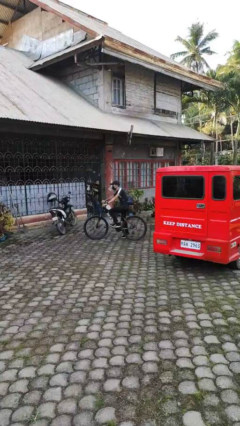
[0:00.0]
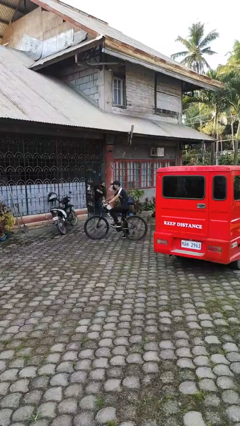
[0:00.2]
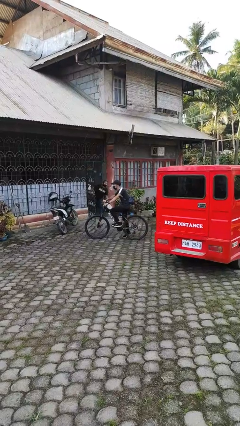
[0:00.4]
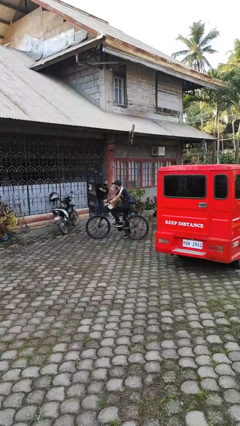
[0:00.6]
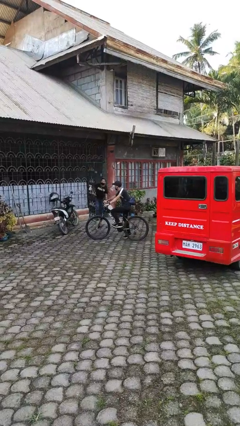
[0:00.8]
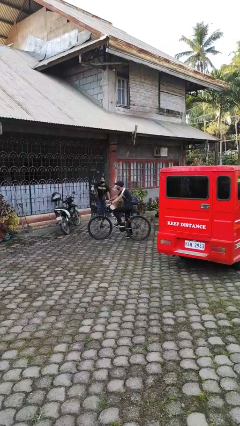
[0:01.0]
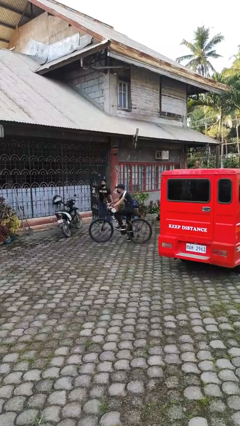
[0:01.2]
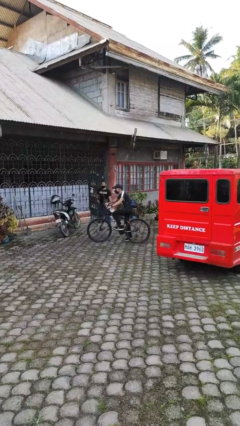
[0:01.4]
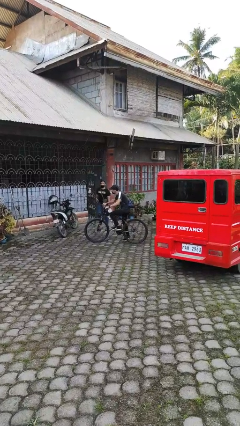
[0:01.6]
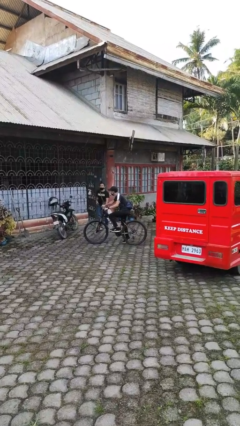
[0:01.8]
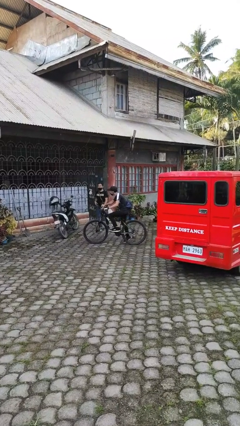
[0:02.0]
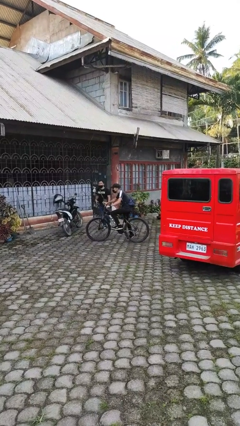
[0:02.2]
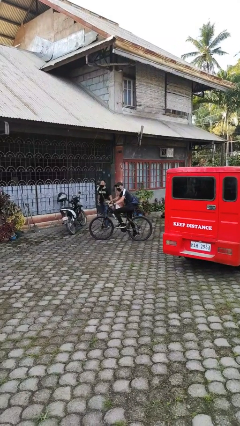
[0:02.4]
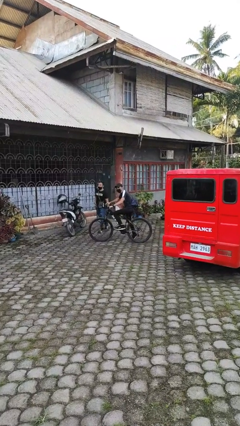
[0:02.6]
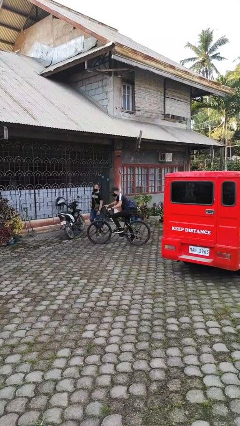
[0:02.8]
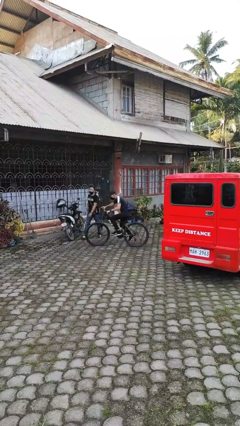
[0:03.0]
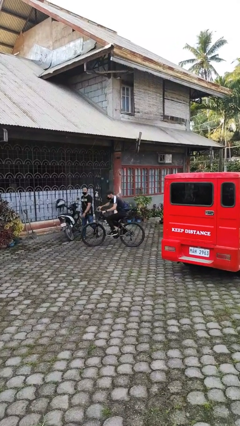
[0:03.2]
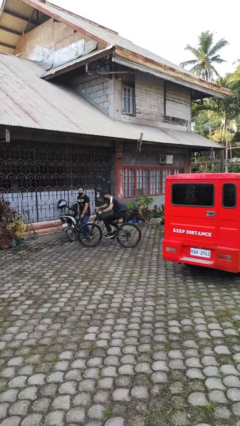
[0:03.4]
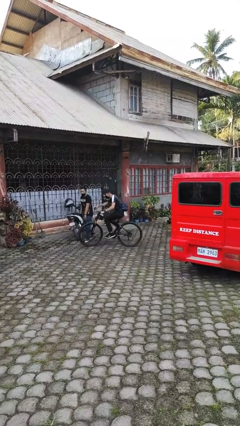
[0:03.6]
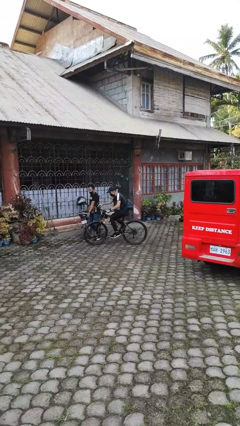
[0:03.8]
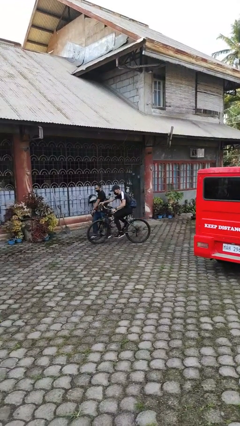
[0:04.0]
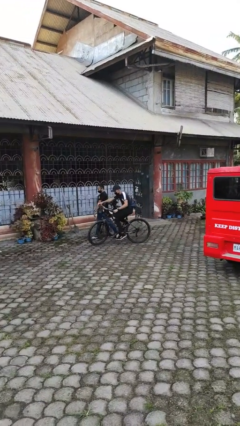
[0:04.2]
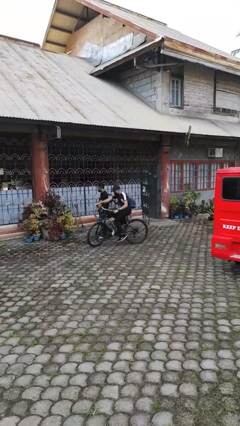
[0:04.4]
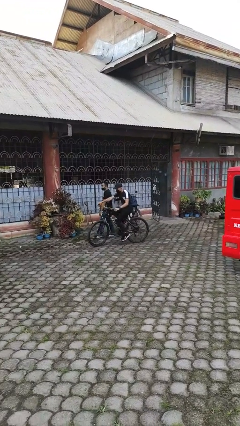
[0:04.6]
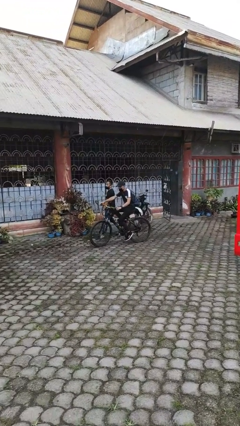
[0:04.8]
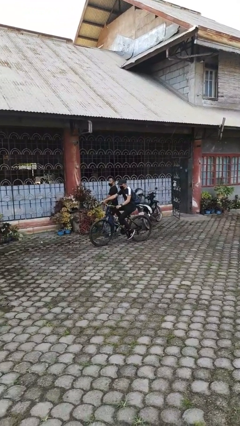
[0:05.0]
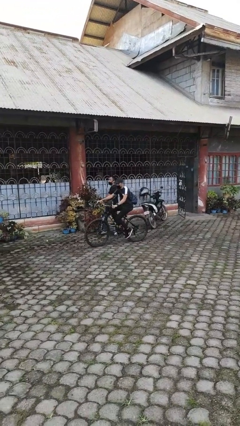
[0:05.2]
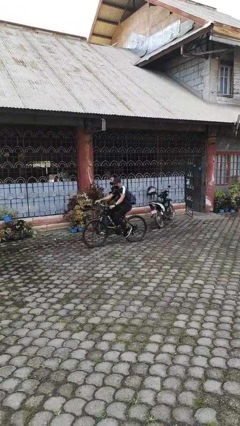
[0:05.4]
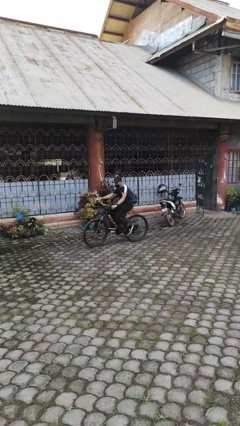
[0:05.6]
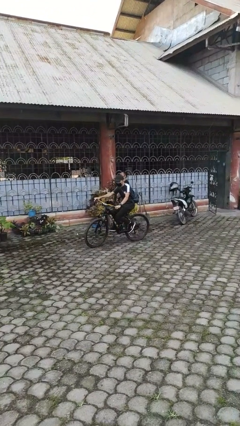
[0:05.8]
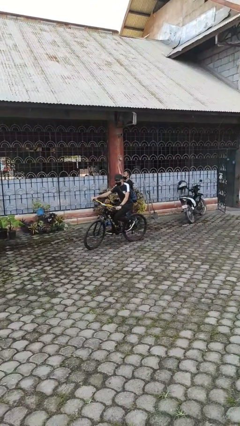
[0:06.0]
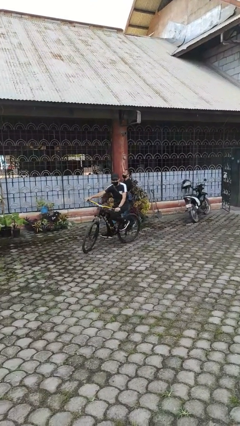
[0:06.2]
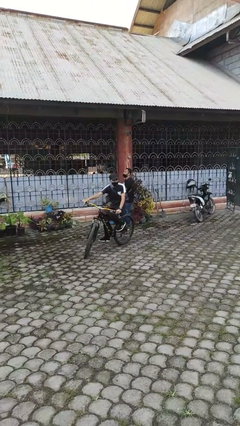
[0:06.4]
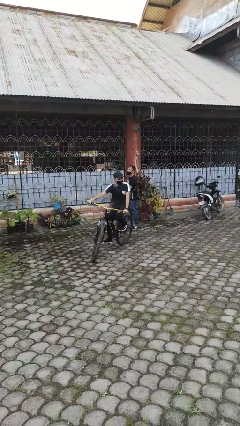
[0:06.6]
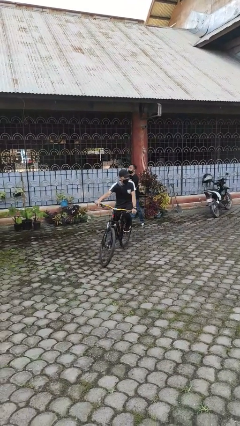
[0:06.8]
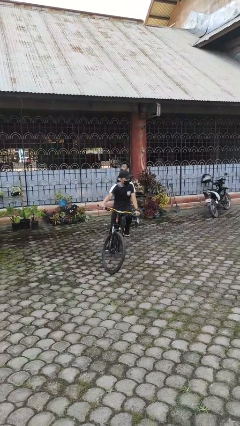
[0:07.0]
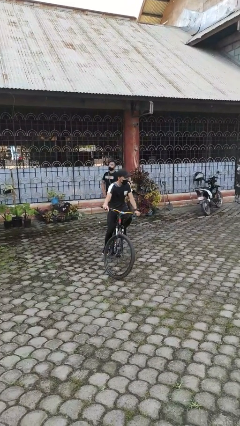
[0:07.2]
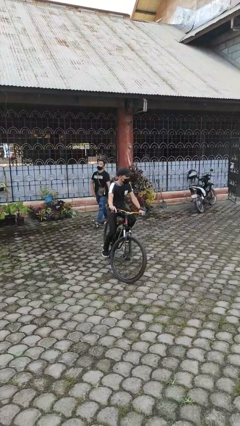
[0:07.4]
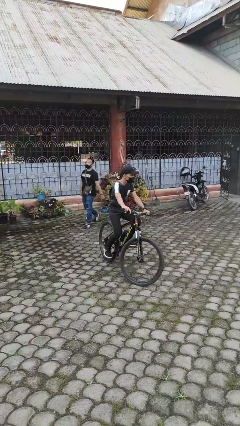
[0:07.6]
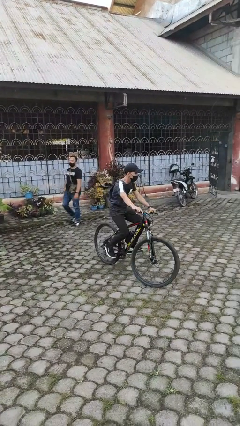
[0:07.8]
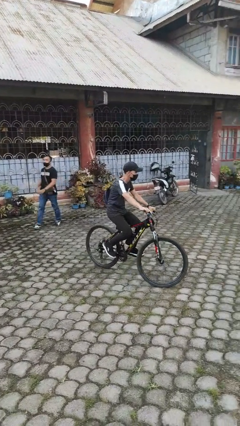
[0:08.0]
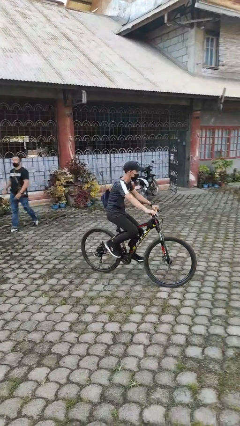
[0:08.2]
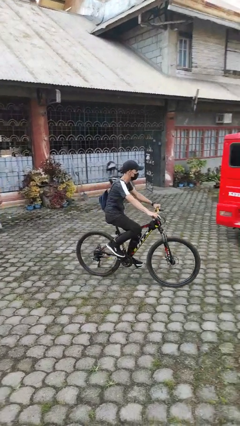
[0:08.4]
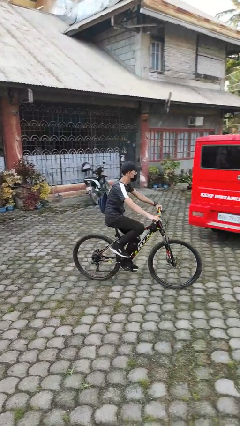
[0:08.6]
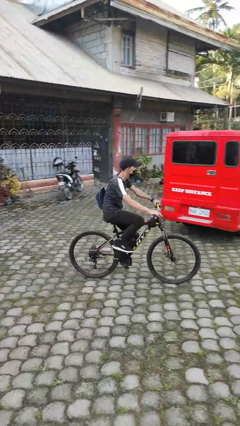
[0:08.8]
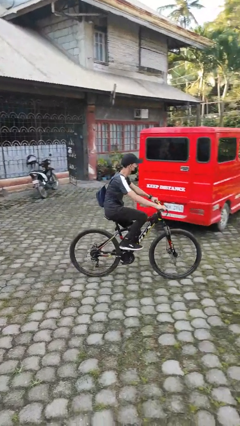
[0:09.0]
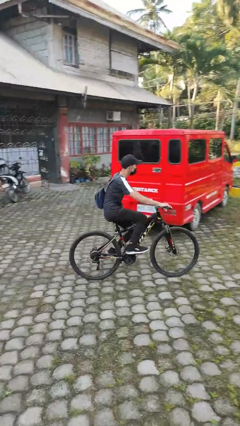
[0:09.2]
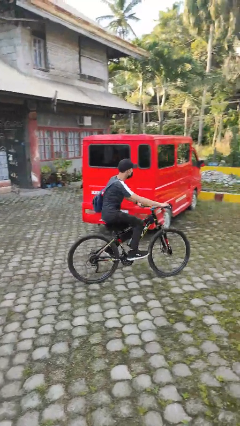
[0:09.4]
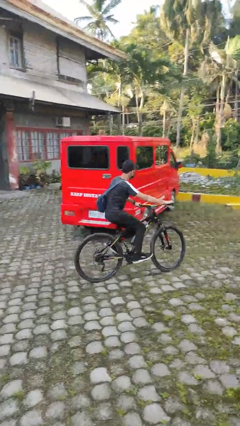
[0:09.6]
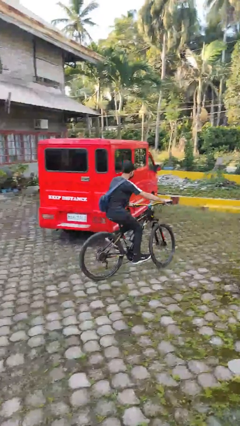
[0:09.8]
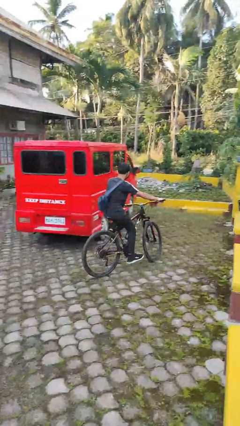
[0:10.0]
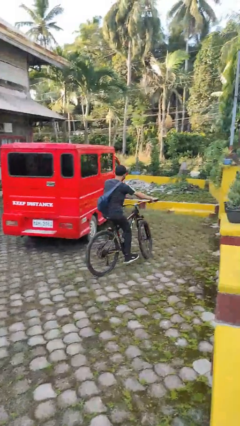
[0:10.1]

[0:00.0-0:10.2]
person rides bicycle

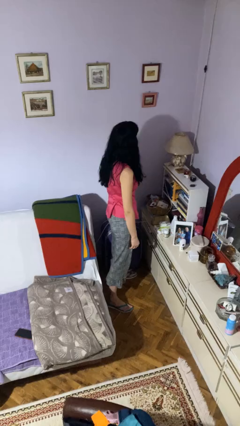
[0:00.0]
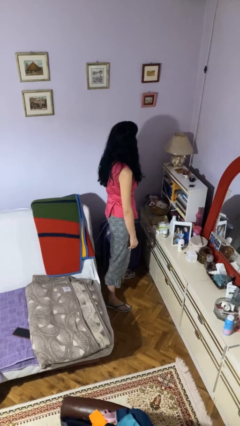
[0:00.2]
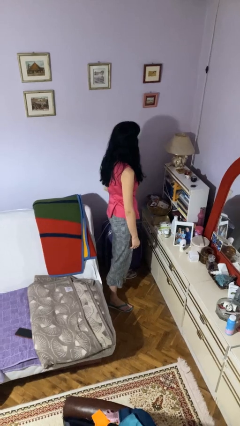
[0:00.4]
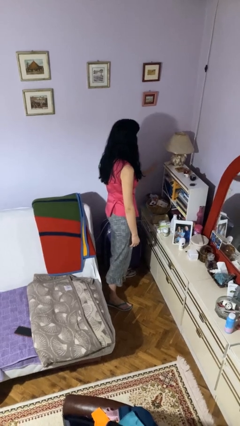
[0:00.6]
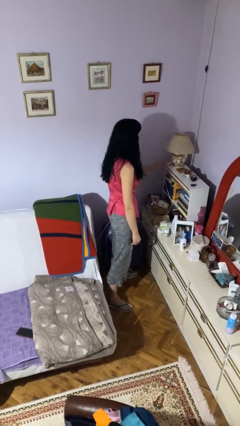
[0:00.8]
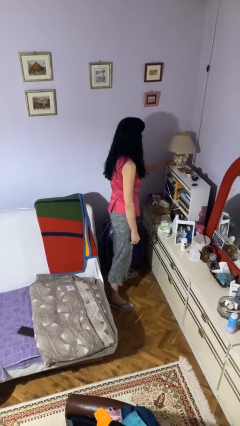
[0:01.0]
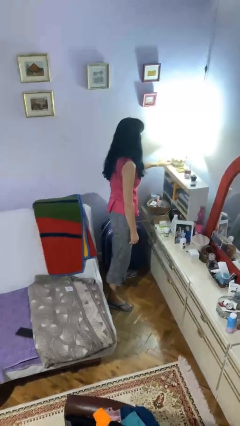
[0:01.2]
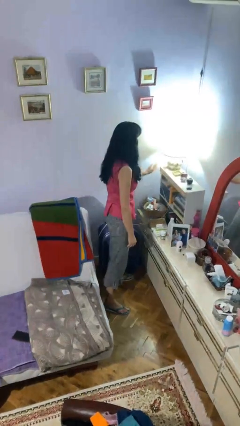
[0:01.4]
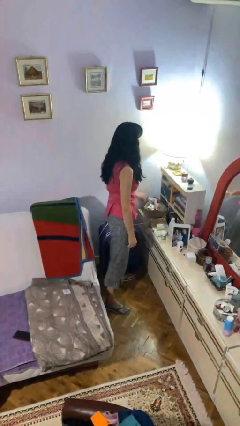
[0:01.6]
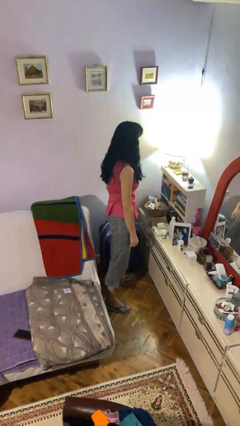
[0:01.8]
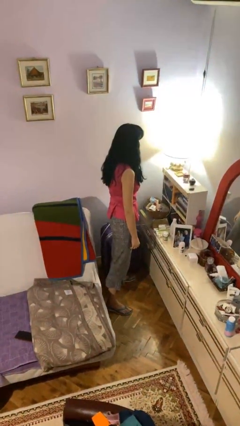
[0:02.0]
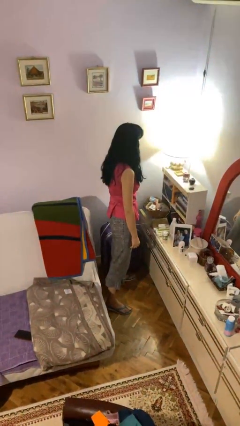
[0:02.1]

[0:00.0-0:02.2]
person turns on lamp

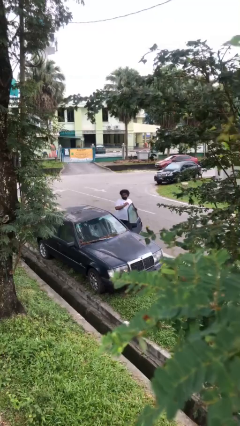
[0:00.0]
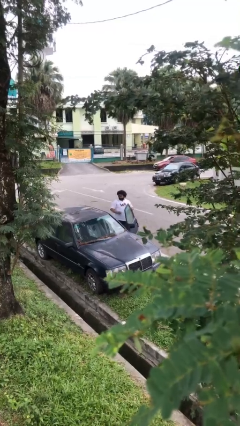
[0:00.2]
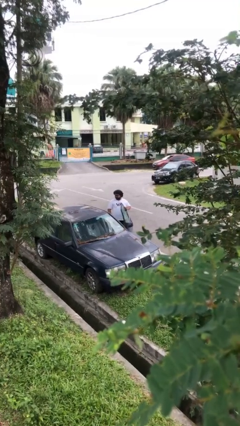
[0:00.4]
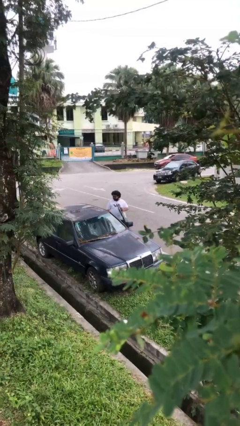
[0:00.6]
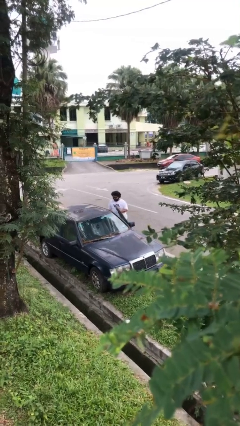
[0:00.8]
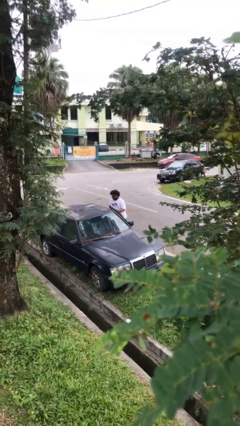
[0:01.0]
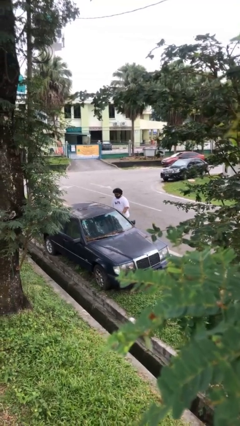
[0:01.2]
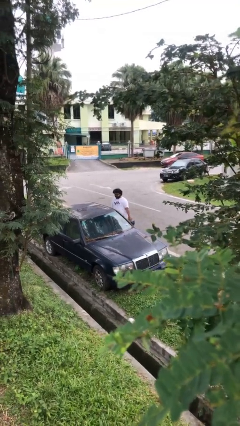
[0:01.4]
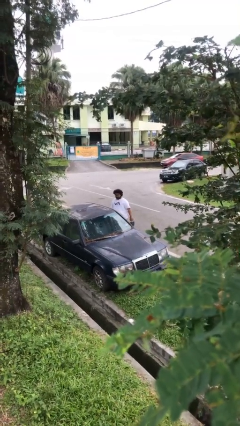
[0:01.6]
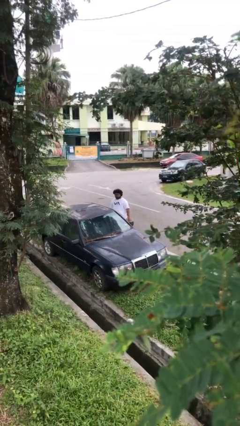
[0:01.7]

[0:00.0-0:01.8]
person closes car door

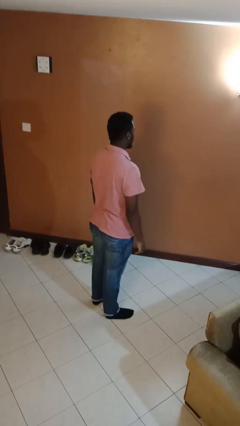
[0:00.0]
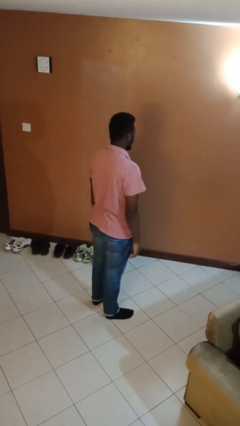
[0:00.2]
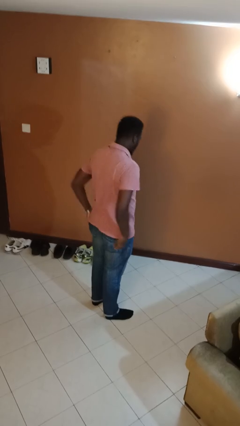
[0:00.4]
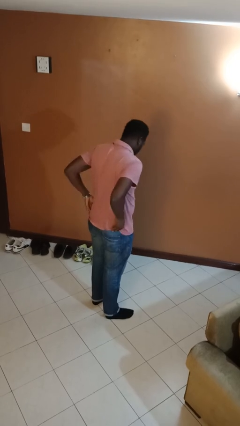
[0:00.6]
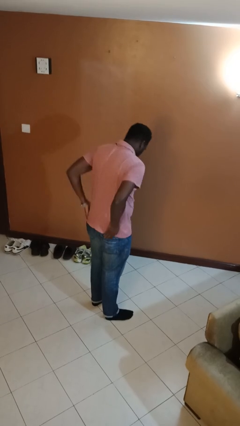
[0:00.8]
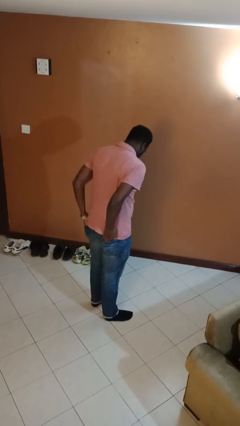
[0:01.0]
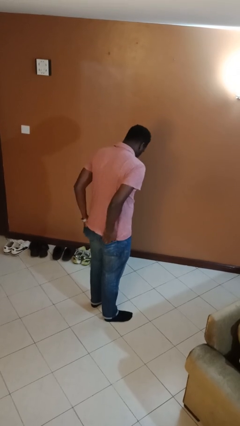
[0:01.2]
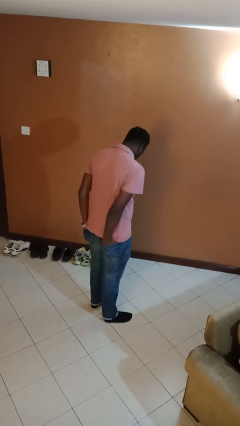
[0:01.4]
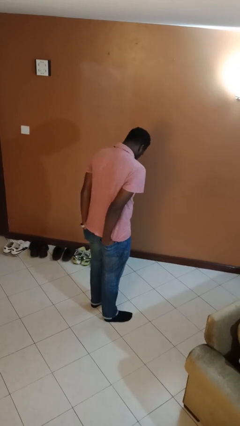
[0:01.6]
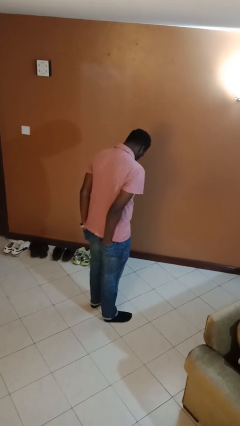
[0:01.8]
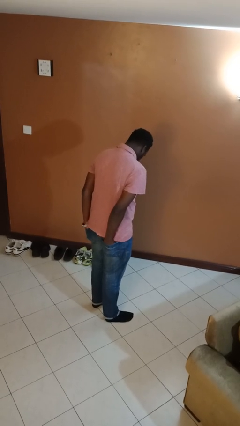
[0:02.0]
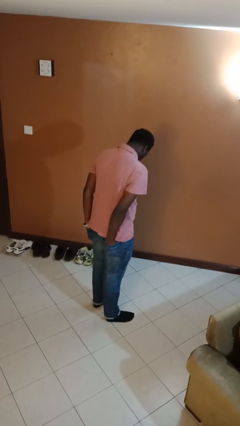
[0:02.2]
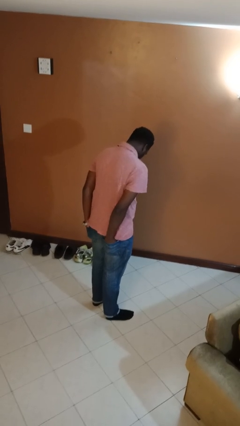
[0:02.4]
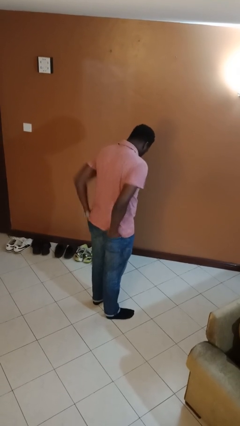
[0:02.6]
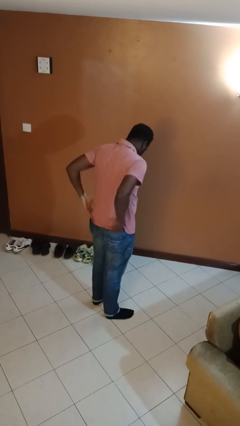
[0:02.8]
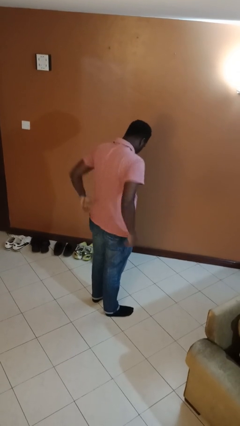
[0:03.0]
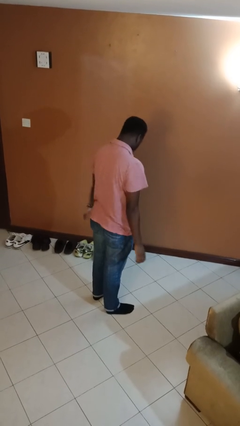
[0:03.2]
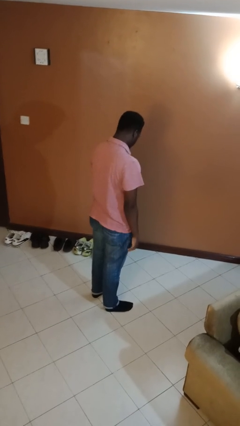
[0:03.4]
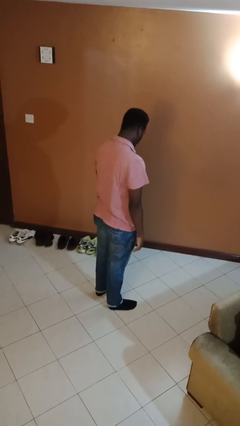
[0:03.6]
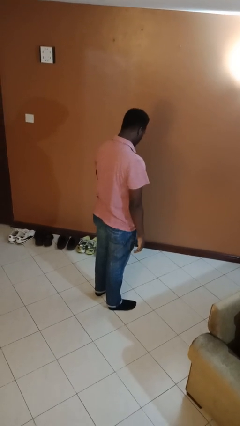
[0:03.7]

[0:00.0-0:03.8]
person puts hands in back pockets
